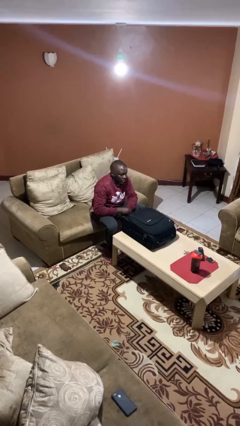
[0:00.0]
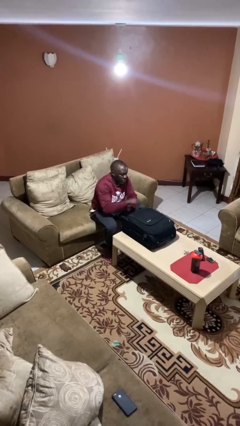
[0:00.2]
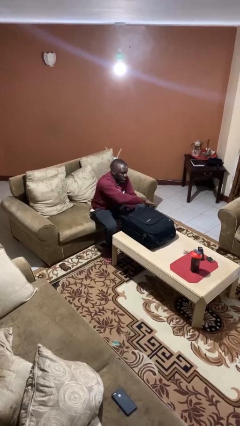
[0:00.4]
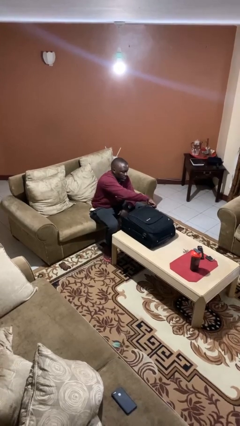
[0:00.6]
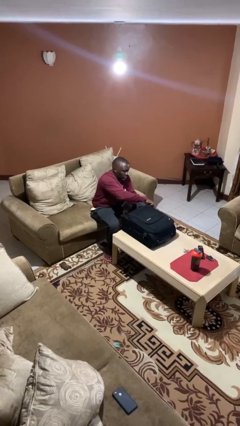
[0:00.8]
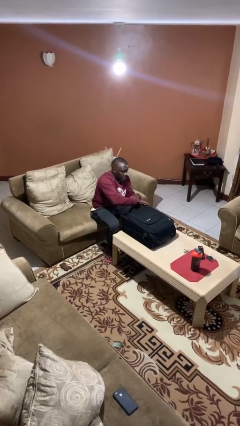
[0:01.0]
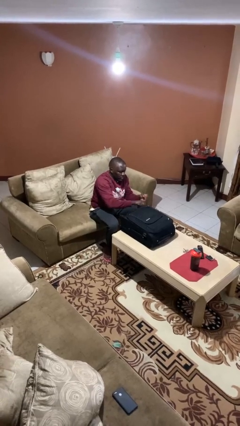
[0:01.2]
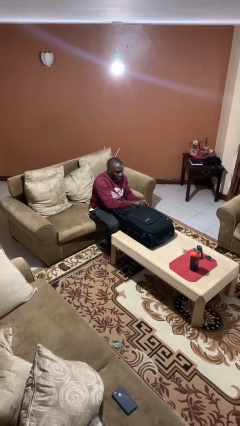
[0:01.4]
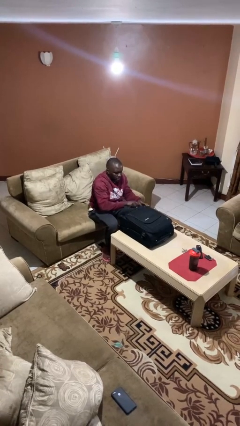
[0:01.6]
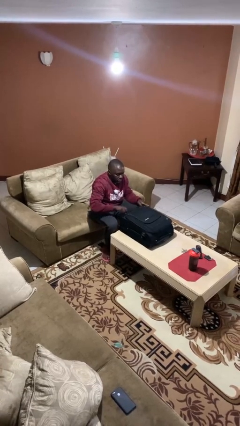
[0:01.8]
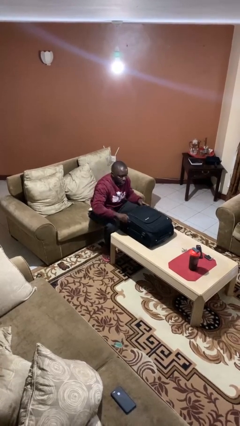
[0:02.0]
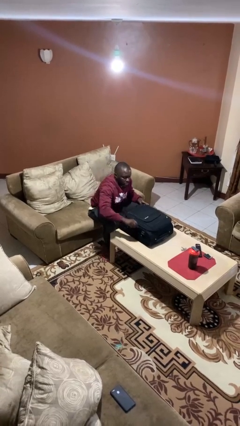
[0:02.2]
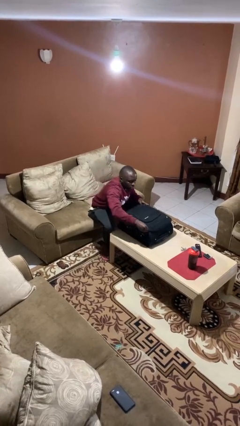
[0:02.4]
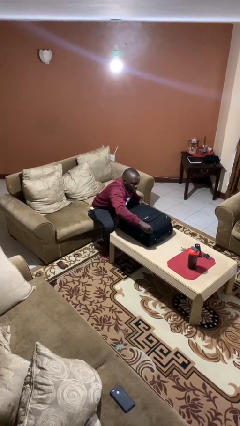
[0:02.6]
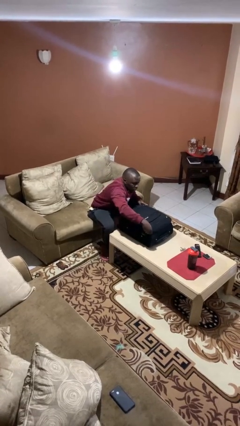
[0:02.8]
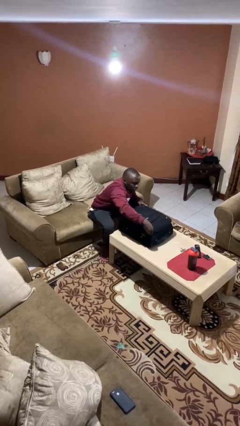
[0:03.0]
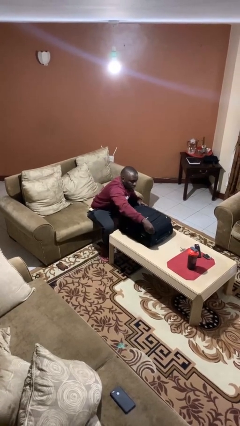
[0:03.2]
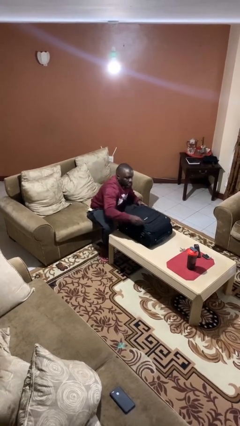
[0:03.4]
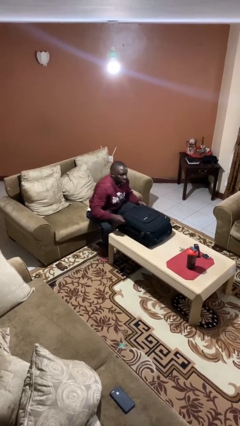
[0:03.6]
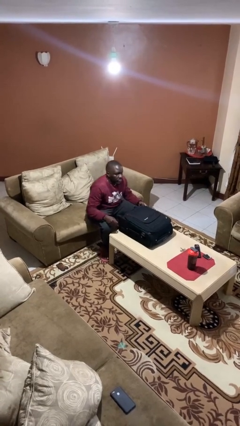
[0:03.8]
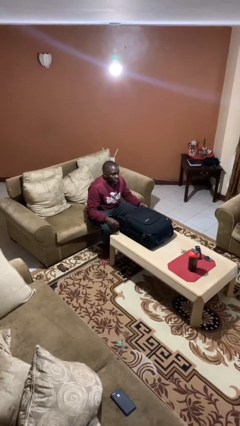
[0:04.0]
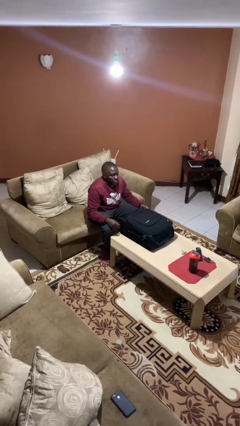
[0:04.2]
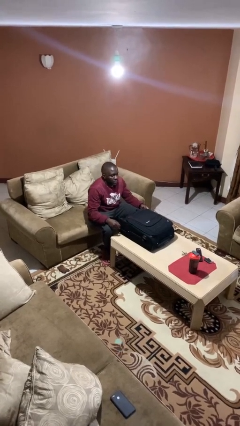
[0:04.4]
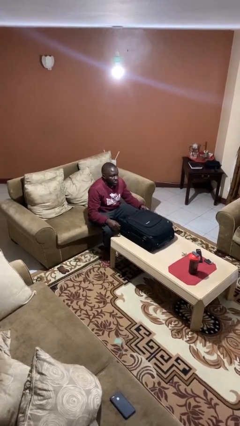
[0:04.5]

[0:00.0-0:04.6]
person closes suitcase

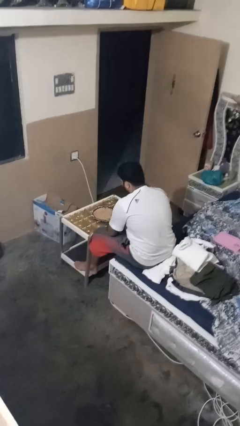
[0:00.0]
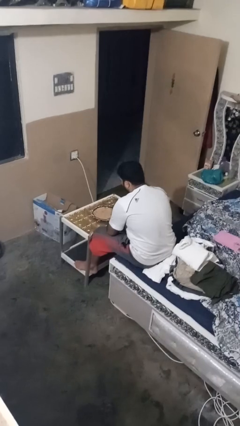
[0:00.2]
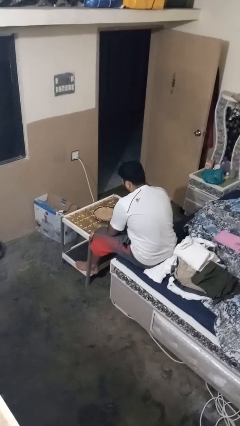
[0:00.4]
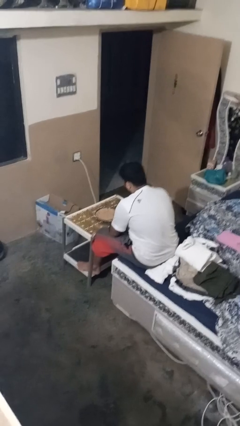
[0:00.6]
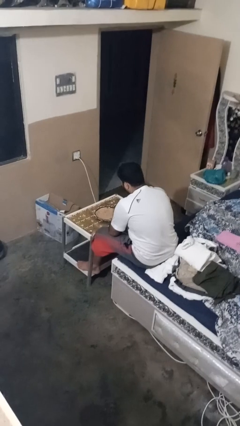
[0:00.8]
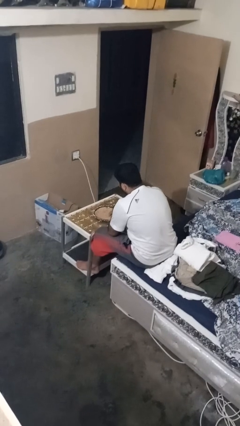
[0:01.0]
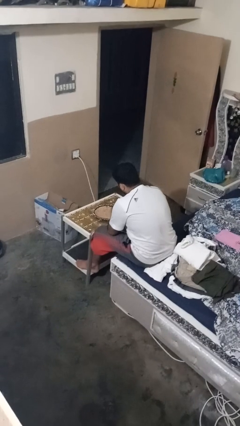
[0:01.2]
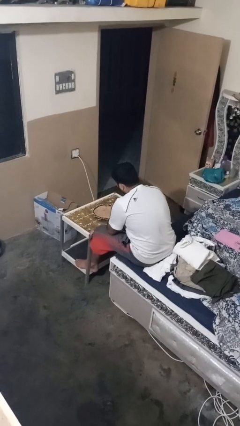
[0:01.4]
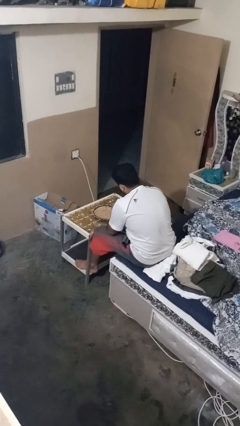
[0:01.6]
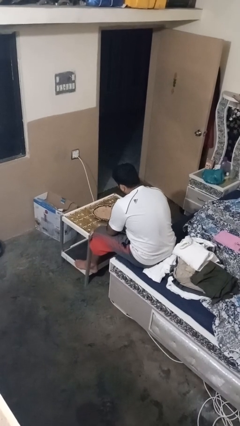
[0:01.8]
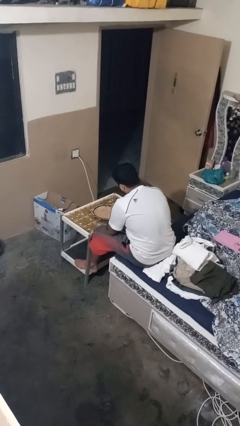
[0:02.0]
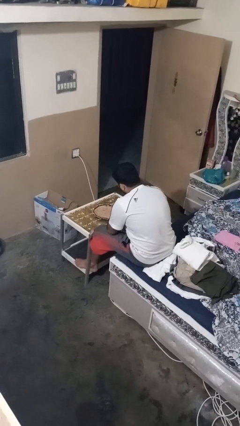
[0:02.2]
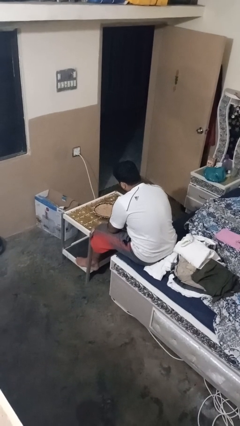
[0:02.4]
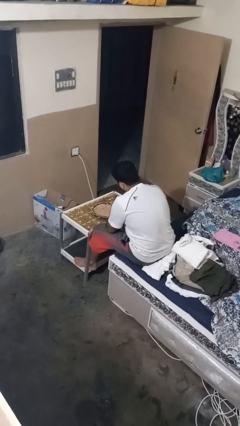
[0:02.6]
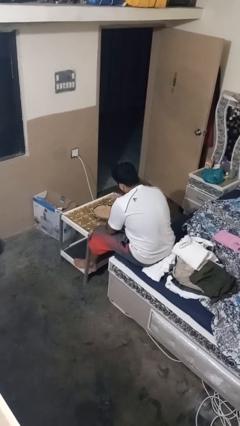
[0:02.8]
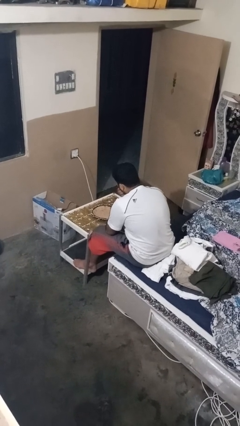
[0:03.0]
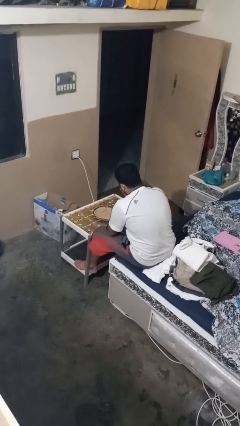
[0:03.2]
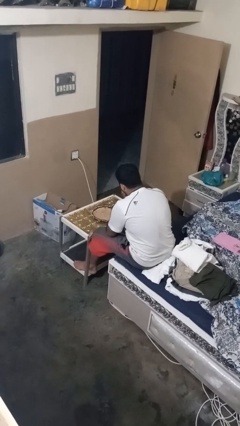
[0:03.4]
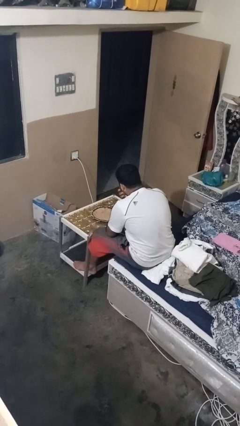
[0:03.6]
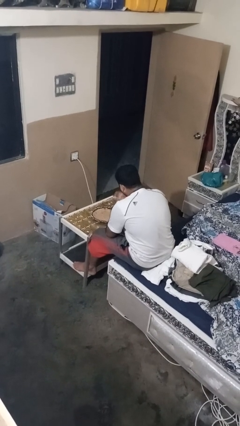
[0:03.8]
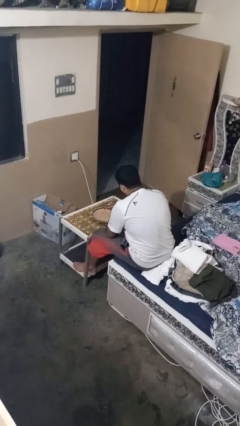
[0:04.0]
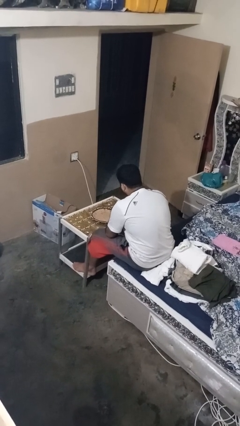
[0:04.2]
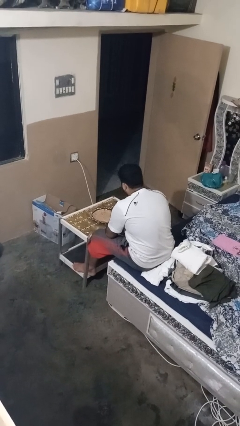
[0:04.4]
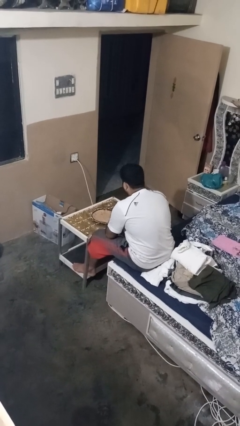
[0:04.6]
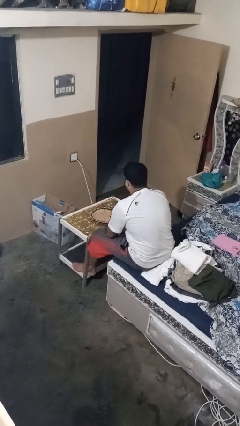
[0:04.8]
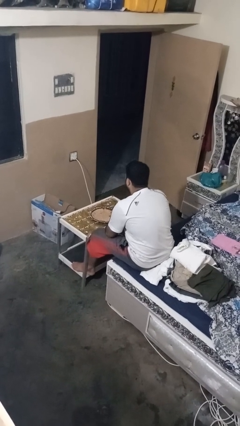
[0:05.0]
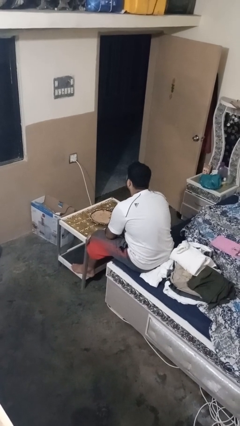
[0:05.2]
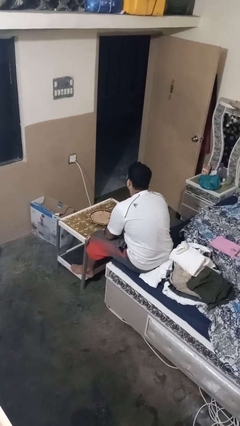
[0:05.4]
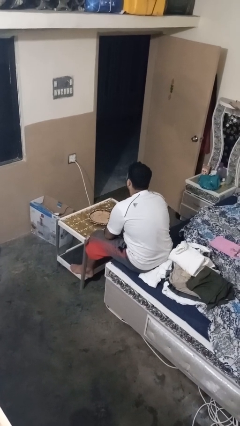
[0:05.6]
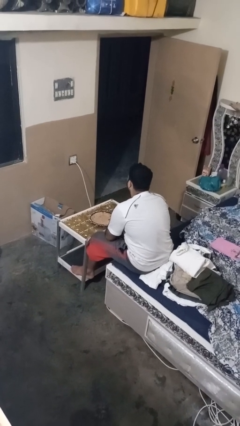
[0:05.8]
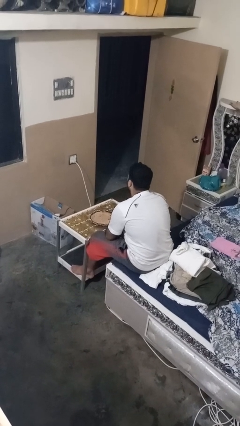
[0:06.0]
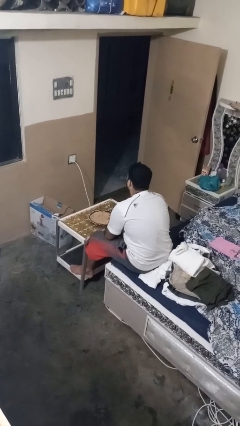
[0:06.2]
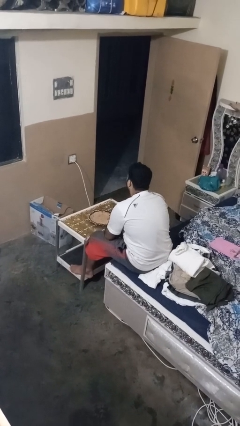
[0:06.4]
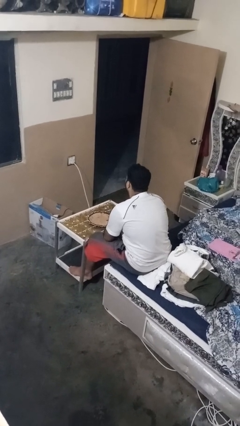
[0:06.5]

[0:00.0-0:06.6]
person eats with hands

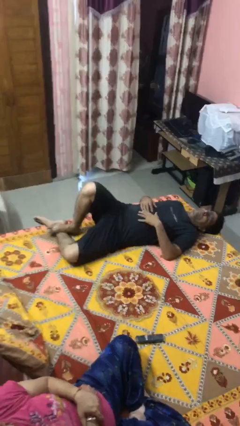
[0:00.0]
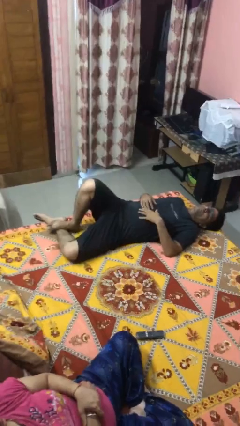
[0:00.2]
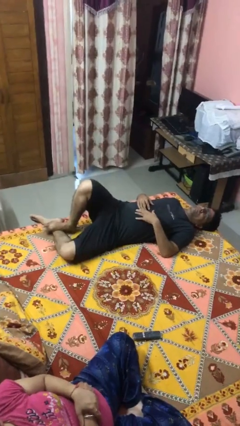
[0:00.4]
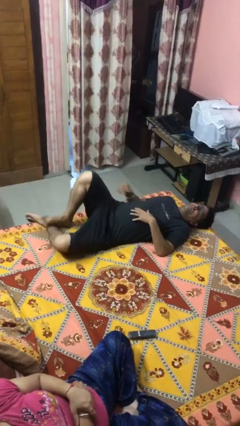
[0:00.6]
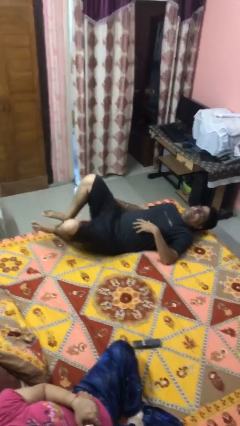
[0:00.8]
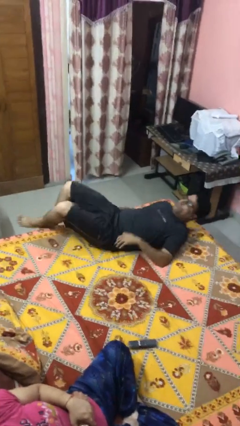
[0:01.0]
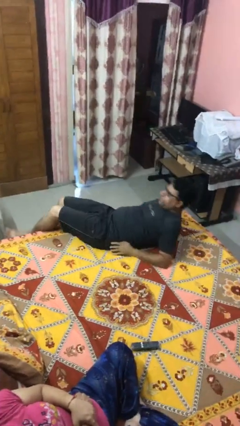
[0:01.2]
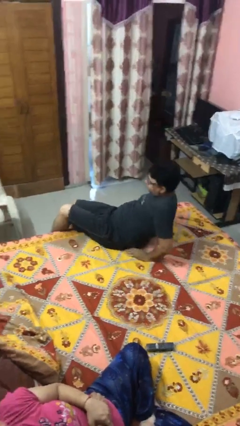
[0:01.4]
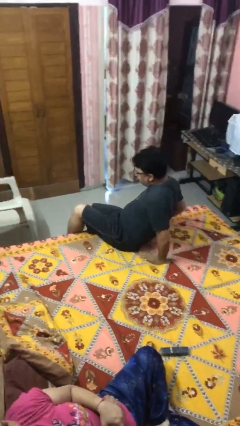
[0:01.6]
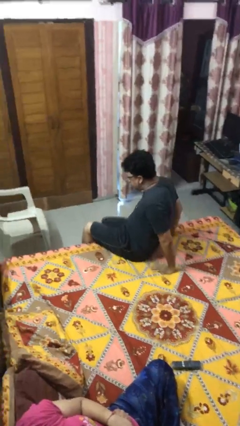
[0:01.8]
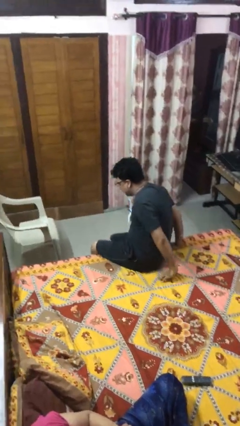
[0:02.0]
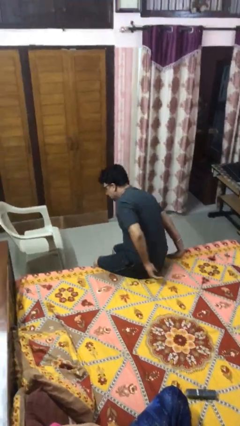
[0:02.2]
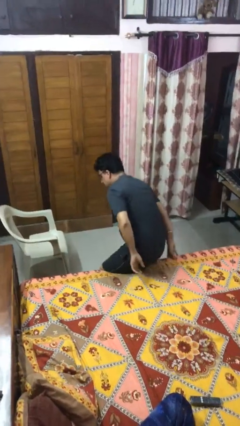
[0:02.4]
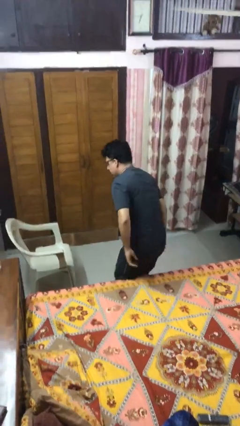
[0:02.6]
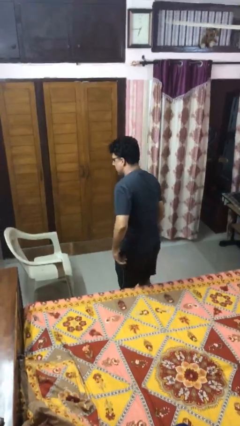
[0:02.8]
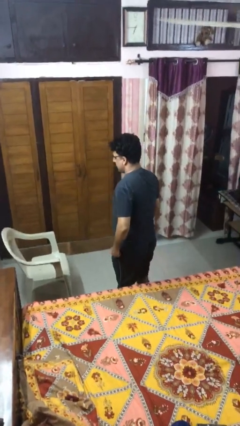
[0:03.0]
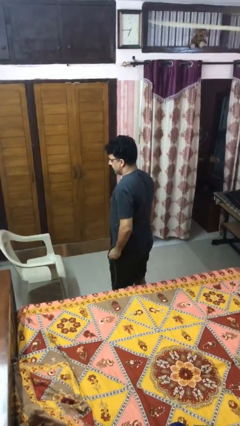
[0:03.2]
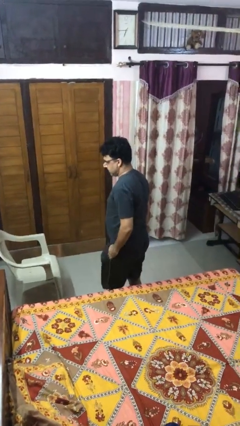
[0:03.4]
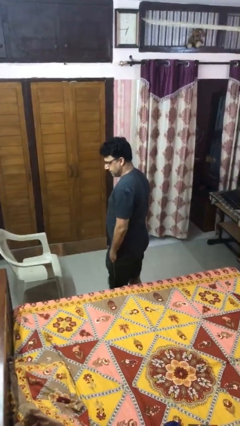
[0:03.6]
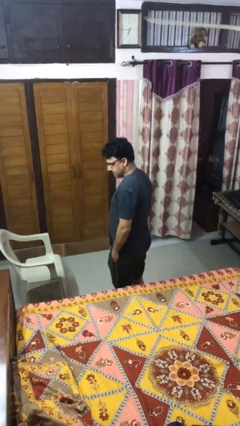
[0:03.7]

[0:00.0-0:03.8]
person stands up

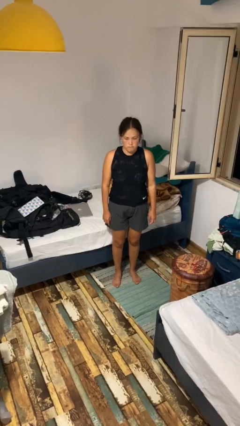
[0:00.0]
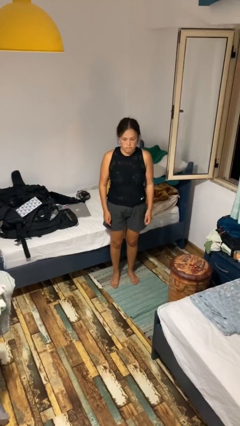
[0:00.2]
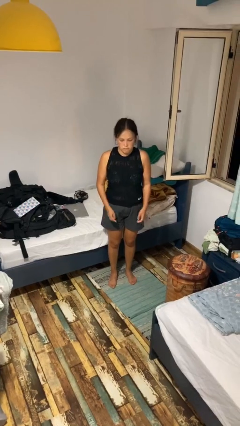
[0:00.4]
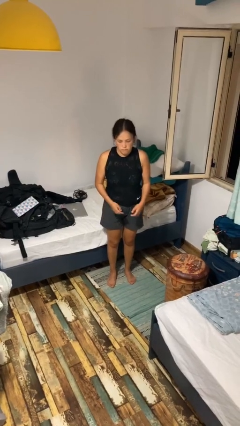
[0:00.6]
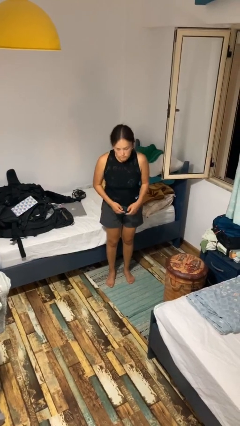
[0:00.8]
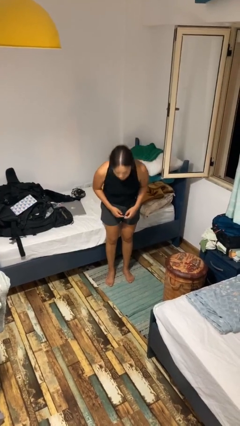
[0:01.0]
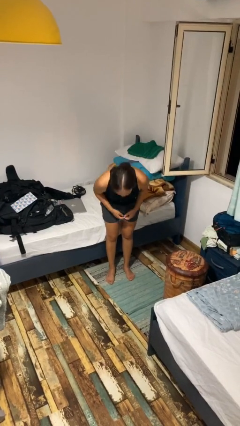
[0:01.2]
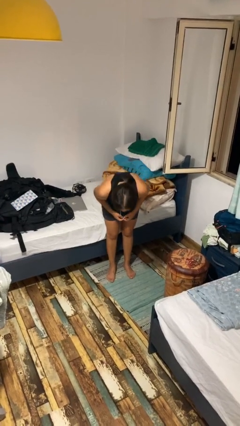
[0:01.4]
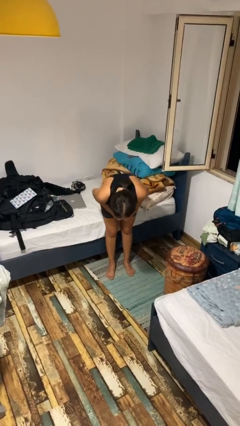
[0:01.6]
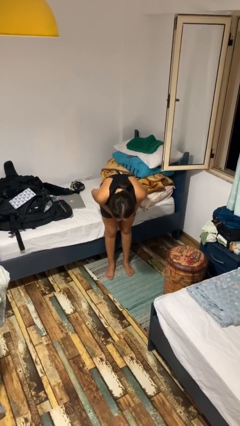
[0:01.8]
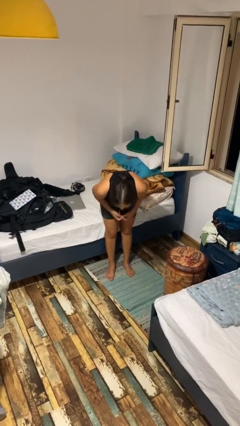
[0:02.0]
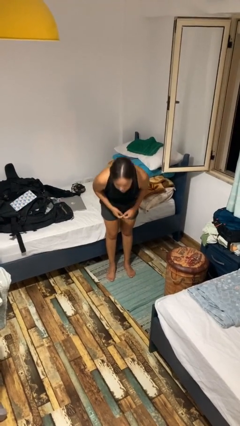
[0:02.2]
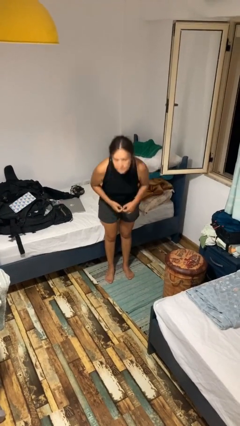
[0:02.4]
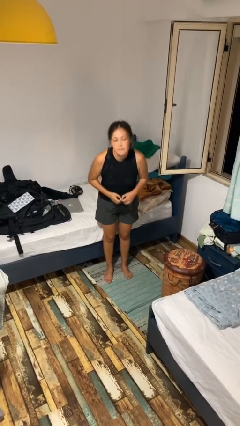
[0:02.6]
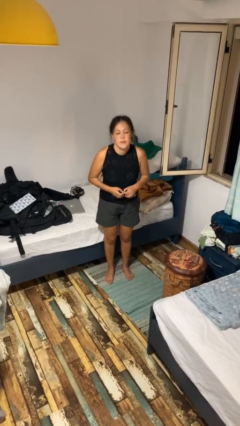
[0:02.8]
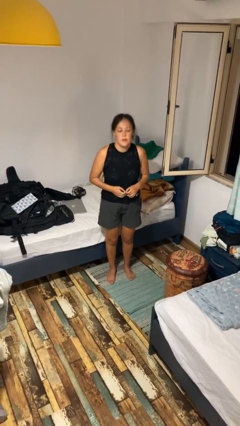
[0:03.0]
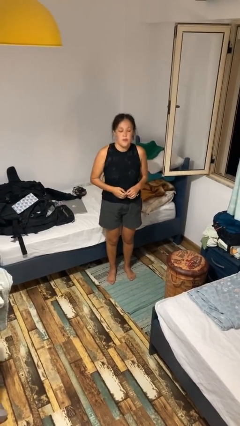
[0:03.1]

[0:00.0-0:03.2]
person bows
